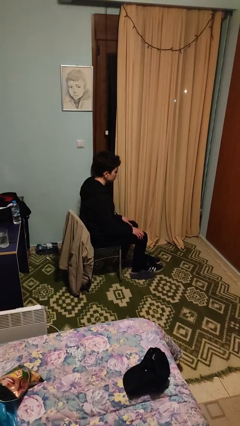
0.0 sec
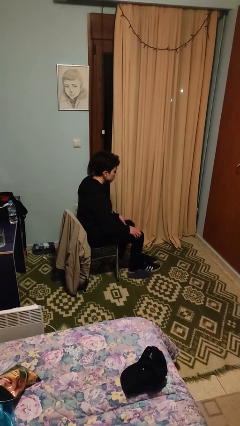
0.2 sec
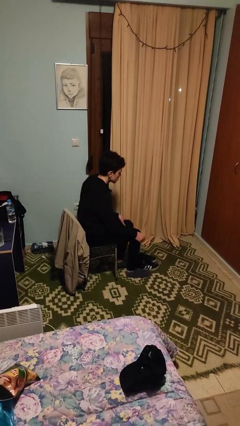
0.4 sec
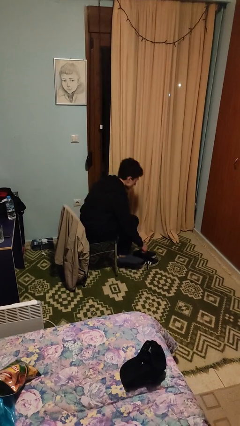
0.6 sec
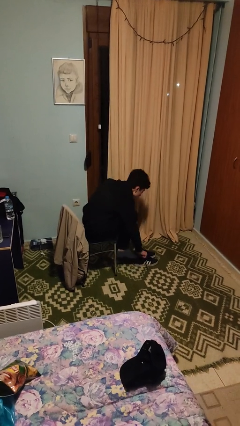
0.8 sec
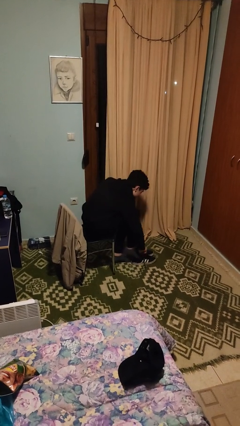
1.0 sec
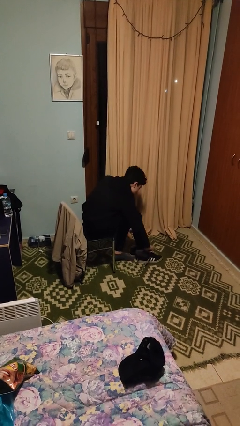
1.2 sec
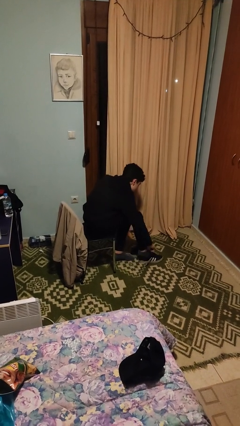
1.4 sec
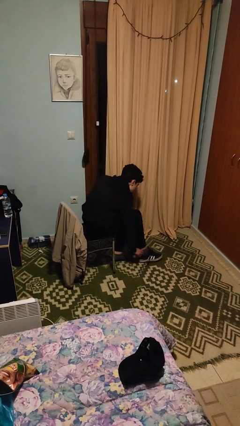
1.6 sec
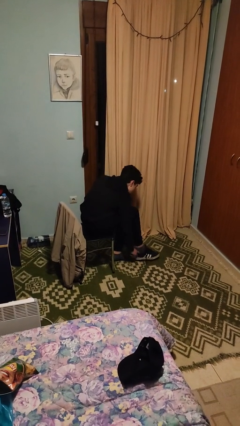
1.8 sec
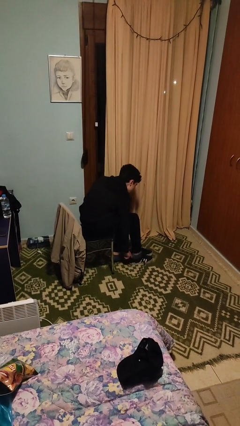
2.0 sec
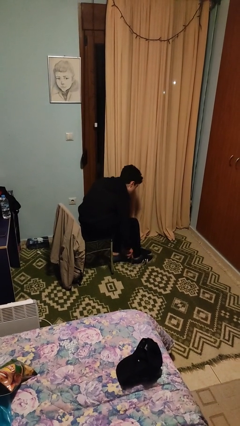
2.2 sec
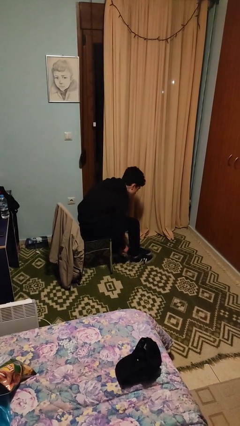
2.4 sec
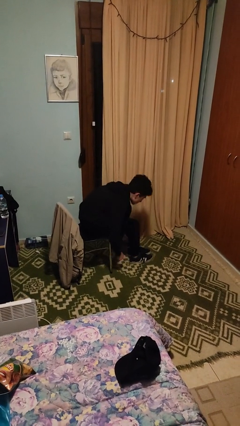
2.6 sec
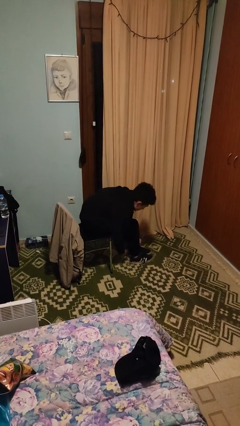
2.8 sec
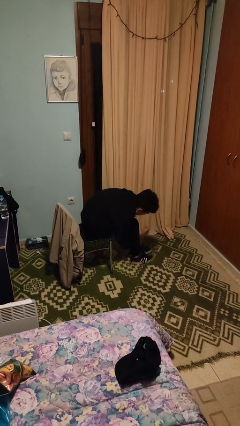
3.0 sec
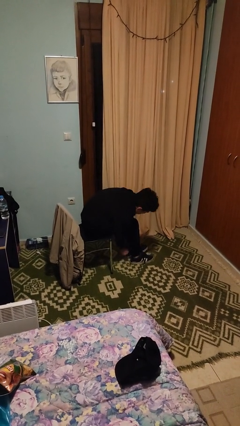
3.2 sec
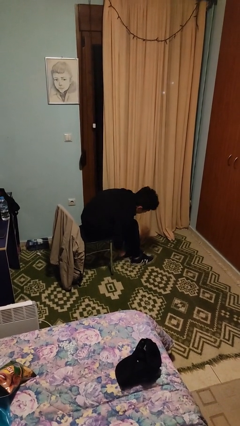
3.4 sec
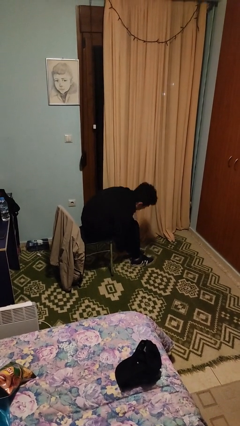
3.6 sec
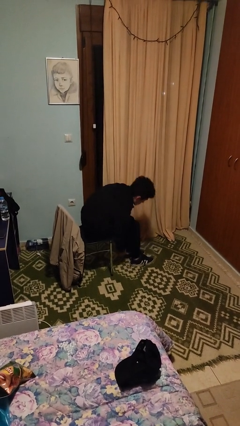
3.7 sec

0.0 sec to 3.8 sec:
person puts on shoes

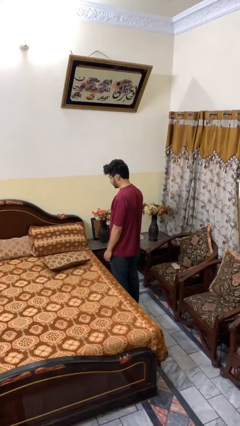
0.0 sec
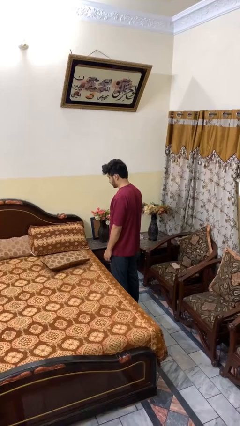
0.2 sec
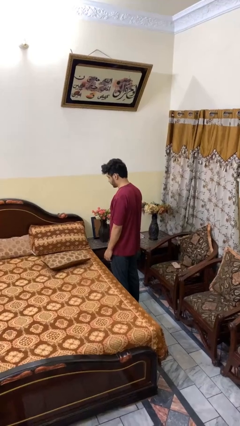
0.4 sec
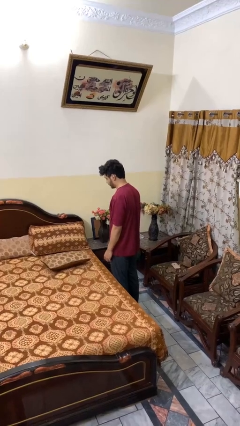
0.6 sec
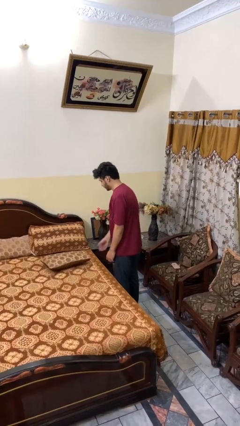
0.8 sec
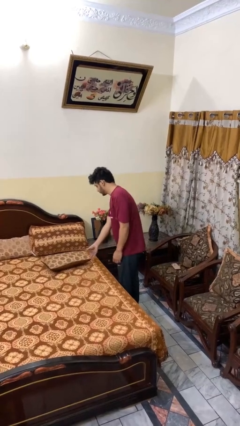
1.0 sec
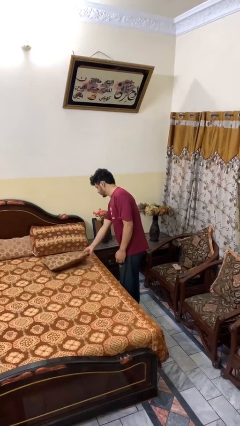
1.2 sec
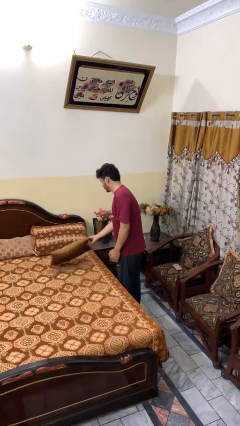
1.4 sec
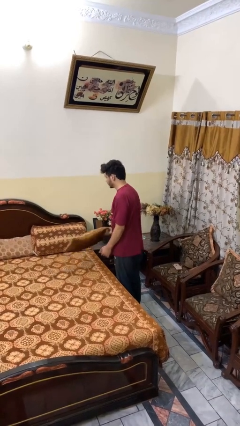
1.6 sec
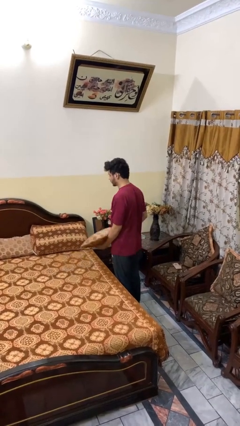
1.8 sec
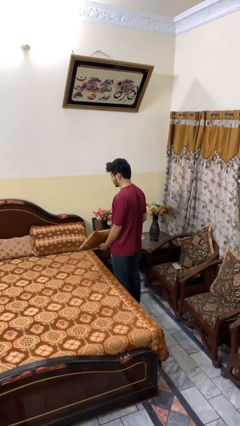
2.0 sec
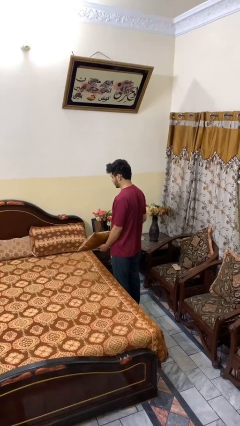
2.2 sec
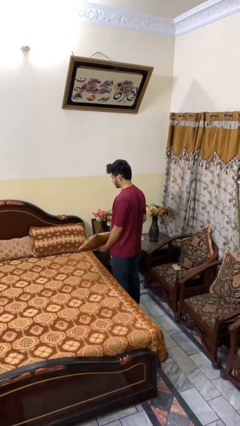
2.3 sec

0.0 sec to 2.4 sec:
person picks up object from bed

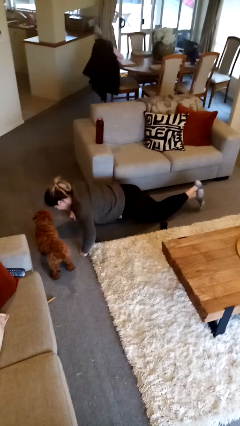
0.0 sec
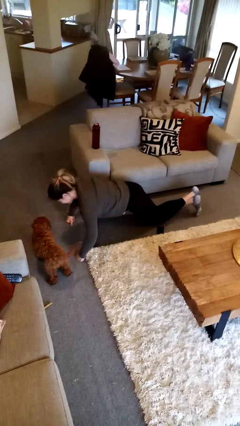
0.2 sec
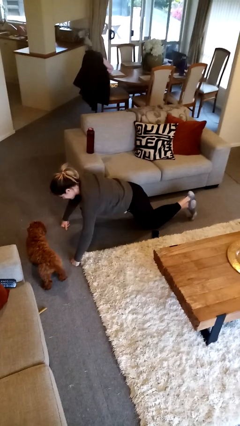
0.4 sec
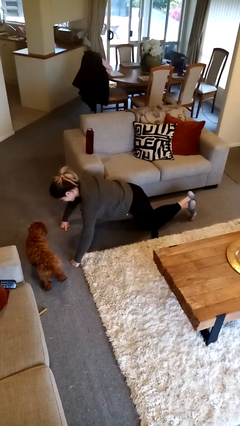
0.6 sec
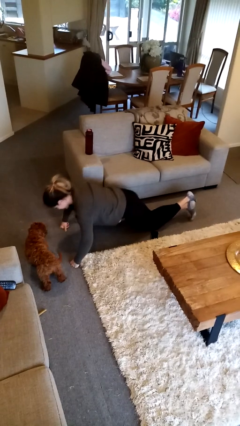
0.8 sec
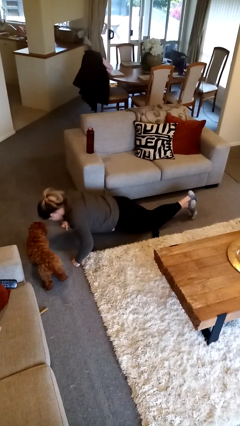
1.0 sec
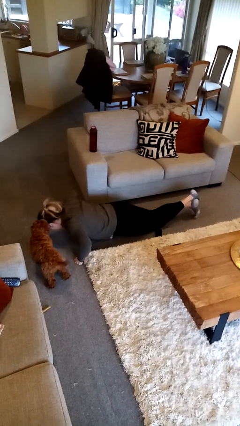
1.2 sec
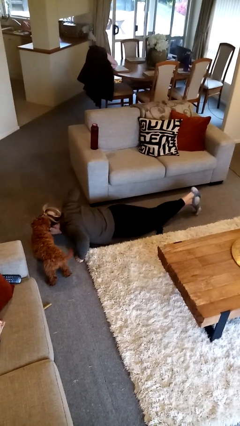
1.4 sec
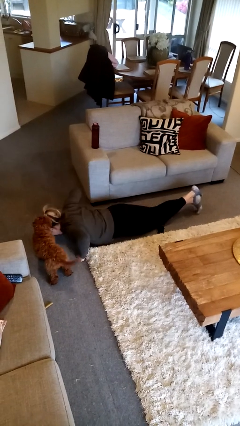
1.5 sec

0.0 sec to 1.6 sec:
person exercises with pushup

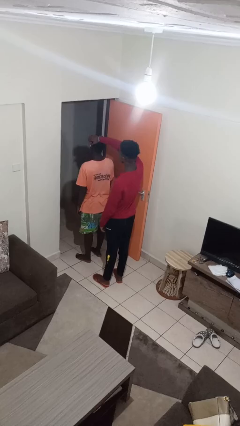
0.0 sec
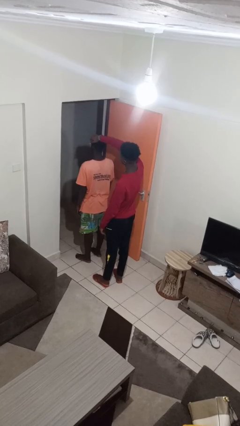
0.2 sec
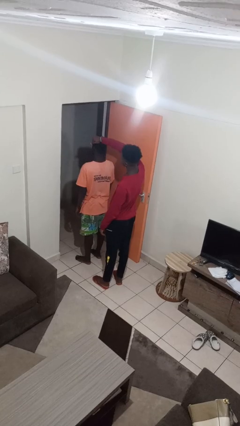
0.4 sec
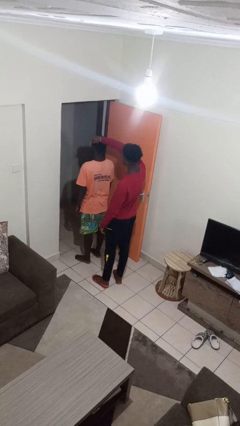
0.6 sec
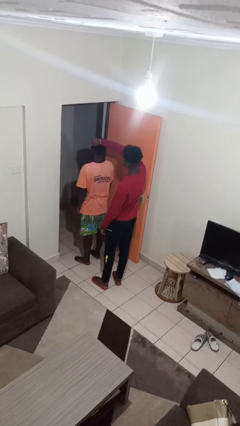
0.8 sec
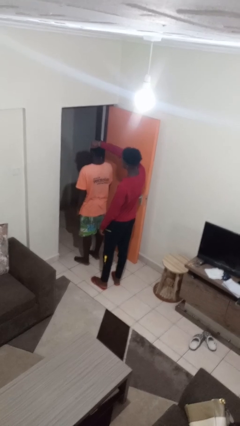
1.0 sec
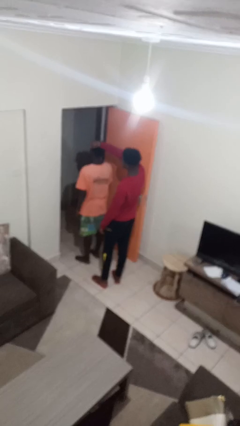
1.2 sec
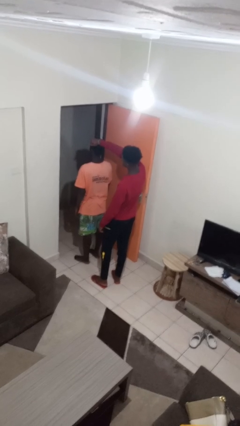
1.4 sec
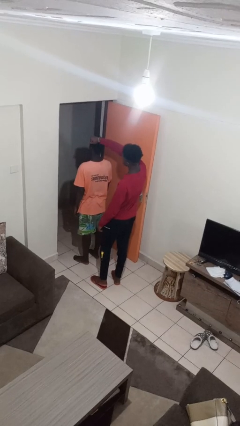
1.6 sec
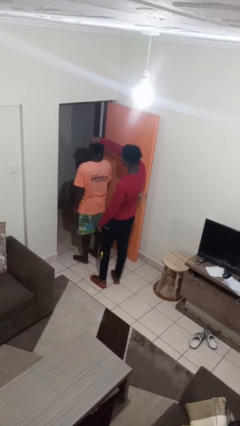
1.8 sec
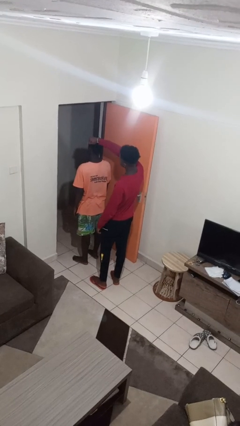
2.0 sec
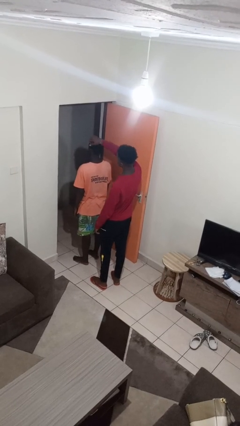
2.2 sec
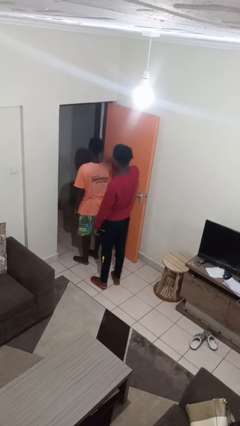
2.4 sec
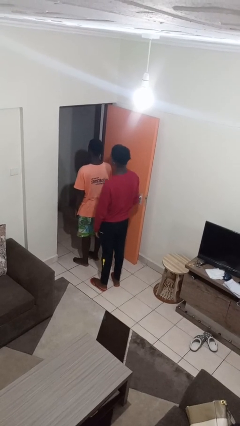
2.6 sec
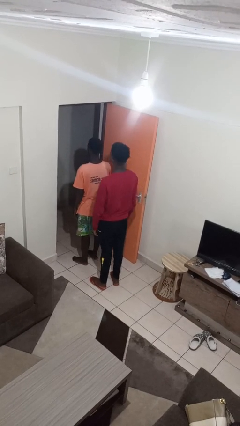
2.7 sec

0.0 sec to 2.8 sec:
person grabs person by hair

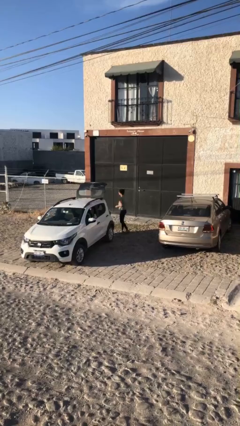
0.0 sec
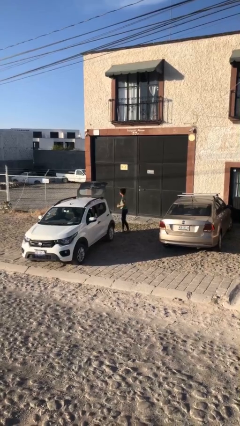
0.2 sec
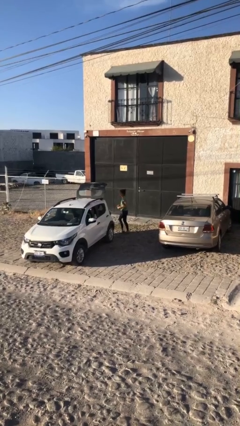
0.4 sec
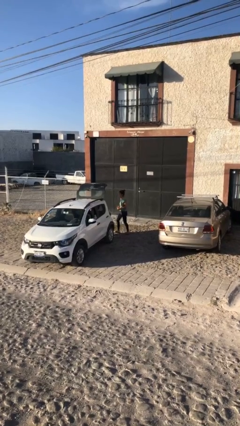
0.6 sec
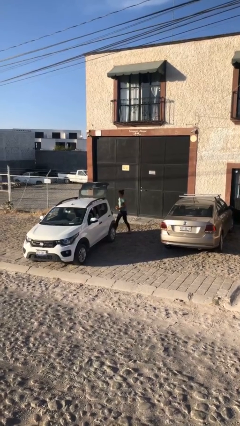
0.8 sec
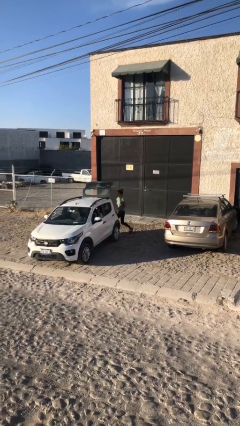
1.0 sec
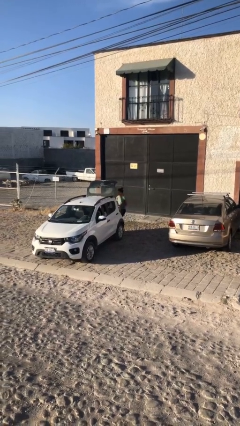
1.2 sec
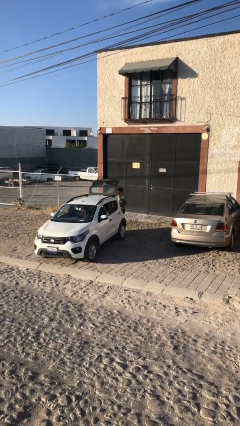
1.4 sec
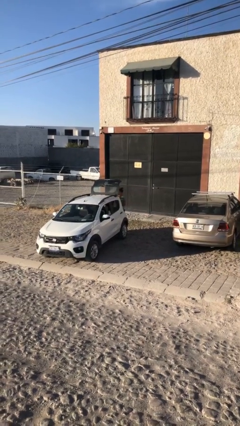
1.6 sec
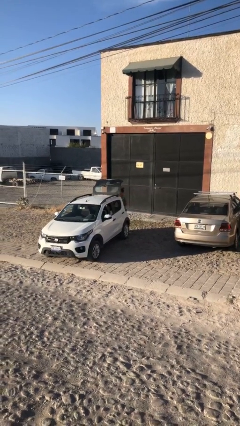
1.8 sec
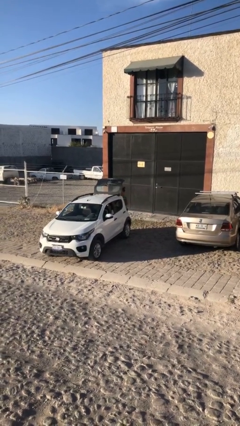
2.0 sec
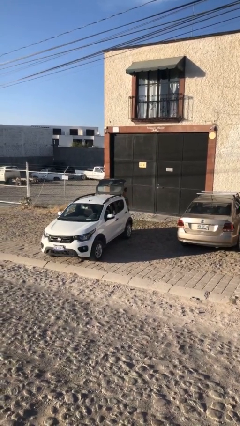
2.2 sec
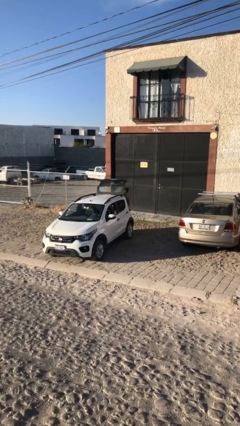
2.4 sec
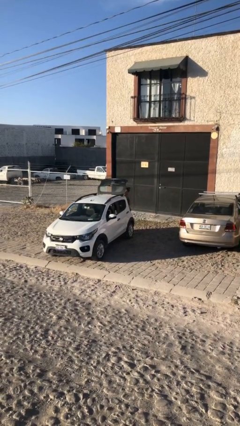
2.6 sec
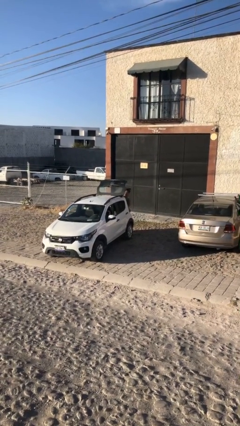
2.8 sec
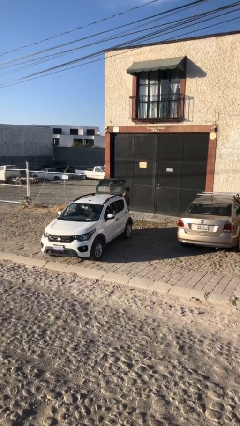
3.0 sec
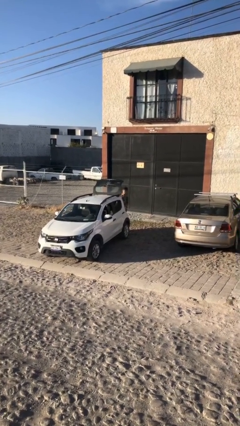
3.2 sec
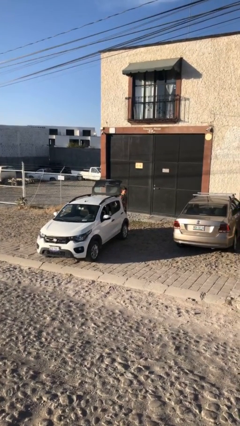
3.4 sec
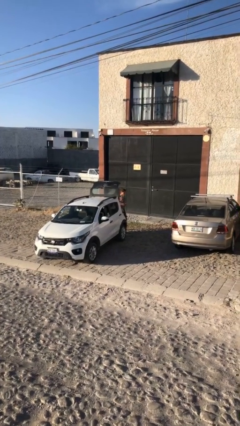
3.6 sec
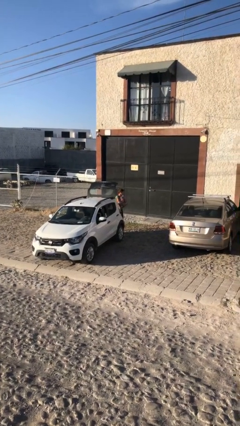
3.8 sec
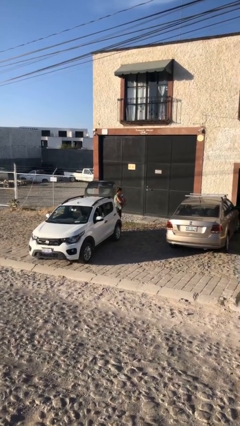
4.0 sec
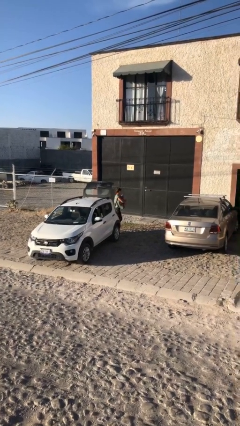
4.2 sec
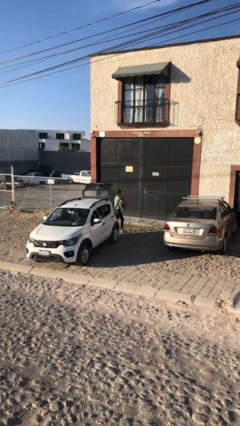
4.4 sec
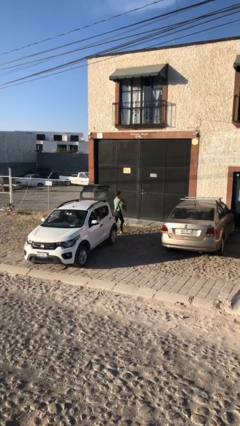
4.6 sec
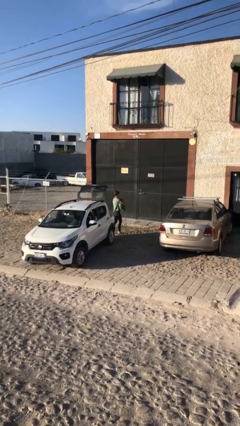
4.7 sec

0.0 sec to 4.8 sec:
person unloads car

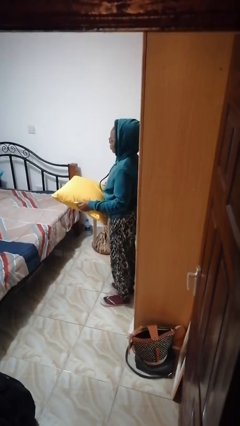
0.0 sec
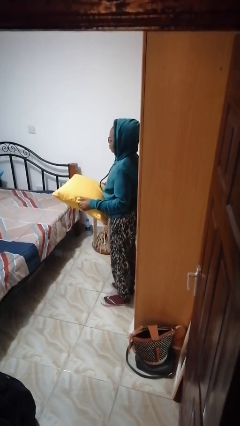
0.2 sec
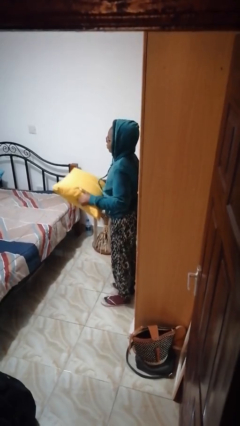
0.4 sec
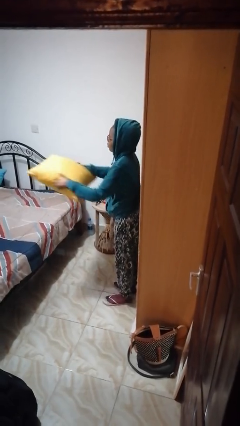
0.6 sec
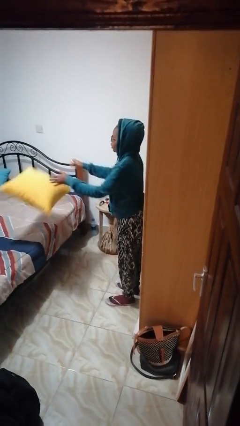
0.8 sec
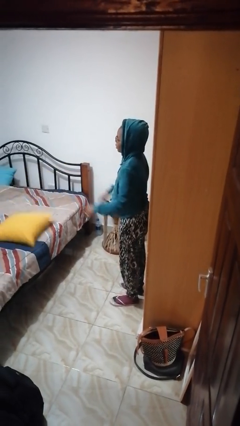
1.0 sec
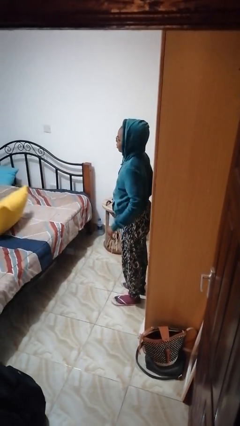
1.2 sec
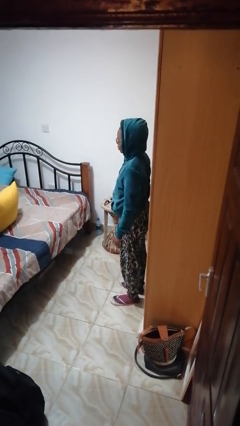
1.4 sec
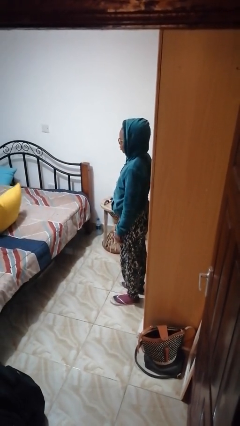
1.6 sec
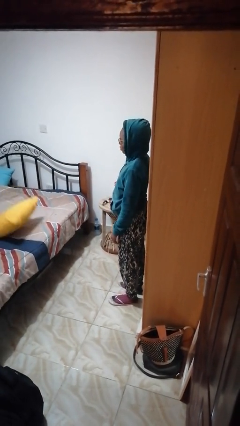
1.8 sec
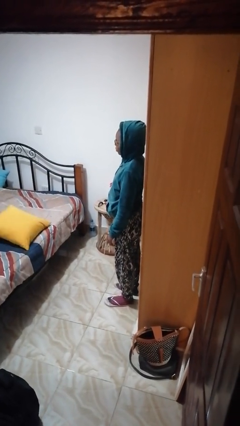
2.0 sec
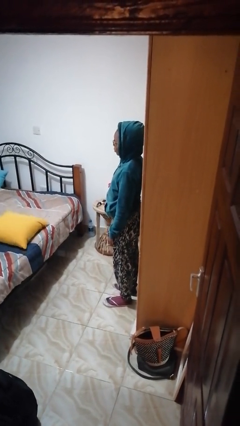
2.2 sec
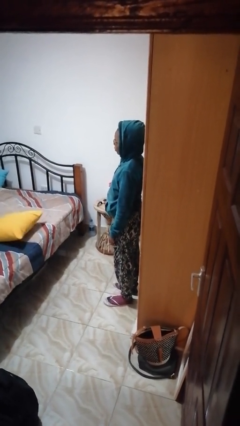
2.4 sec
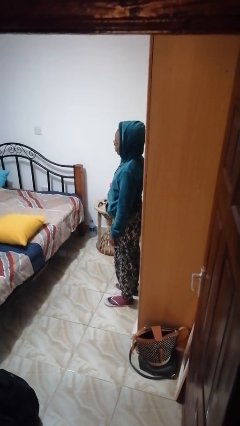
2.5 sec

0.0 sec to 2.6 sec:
person throws object on bed
